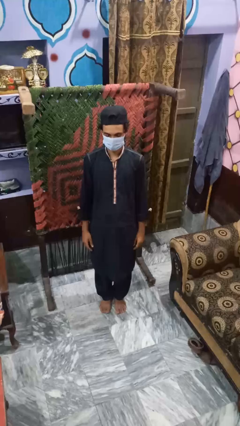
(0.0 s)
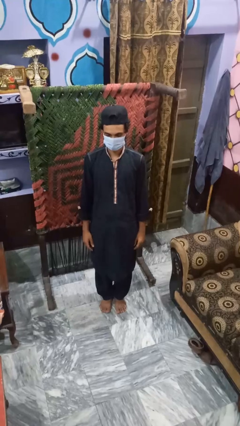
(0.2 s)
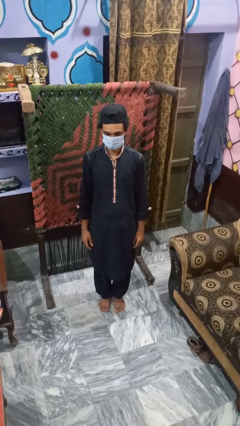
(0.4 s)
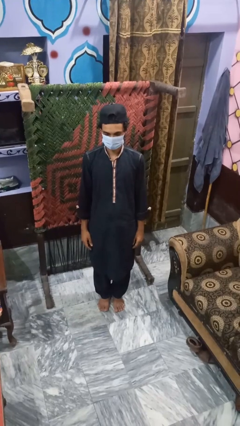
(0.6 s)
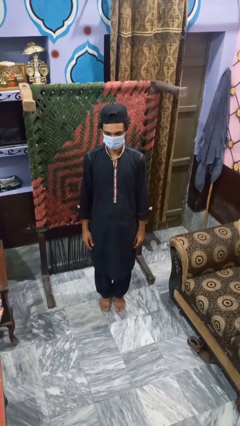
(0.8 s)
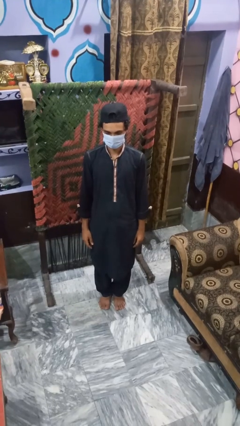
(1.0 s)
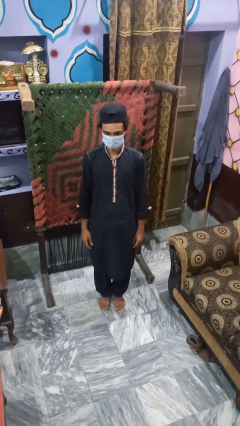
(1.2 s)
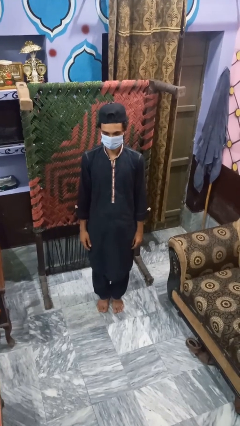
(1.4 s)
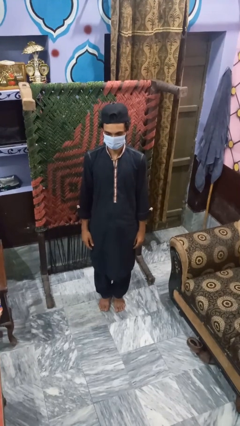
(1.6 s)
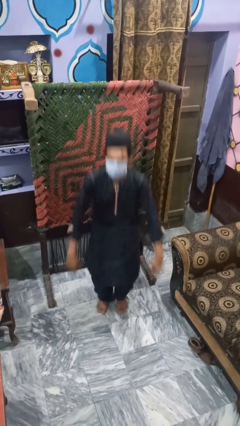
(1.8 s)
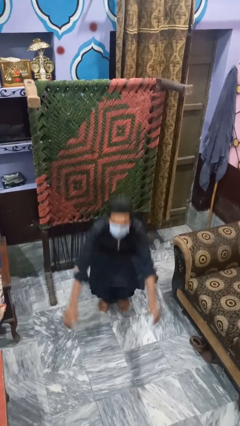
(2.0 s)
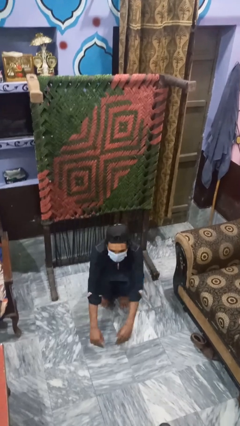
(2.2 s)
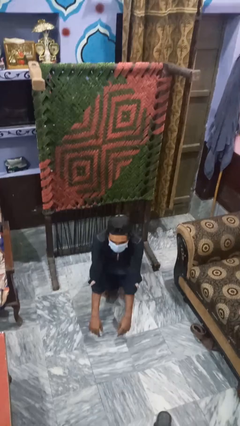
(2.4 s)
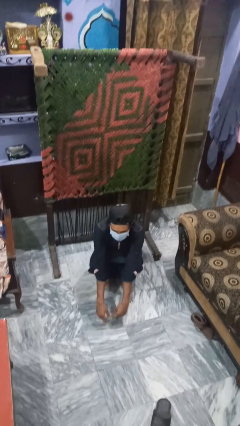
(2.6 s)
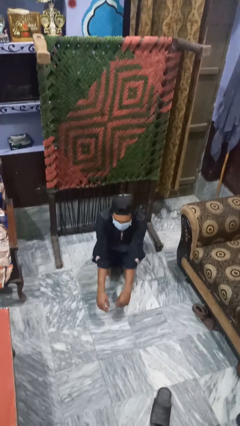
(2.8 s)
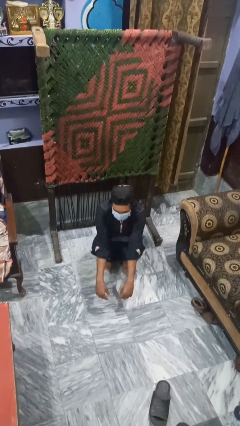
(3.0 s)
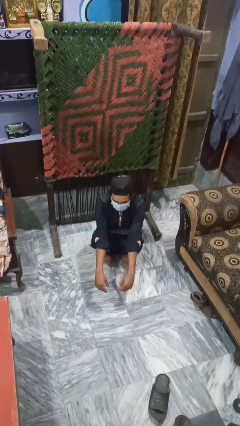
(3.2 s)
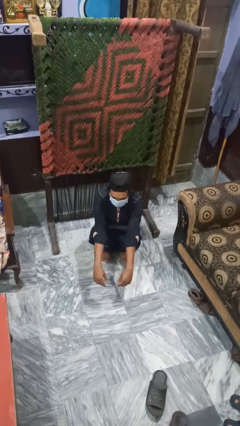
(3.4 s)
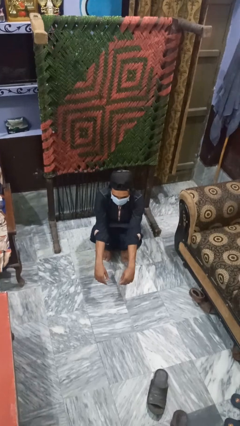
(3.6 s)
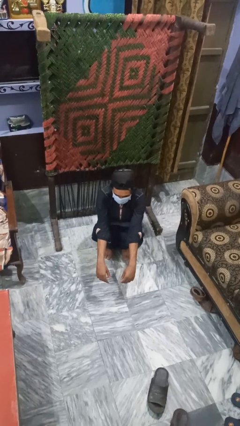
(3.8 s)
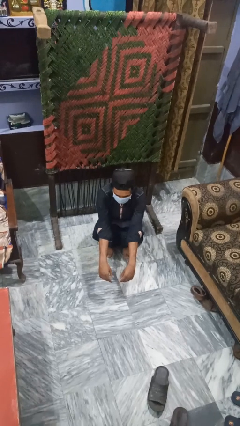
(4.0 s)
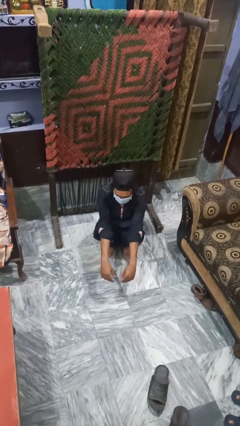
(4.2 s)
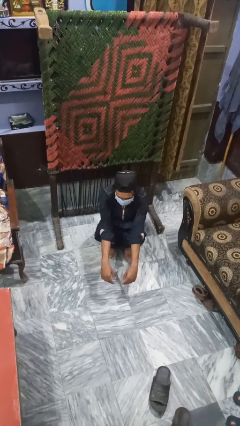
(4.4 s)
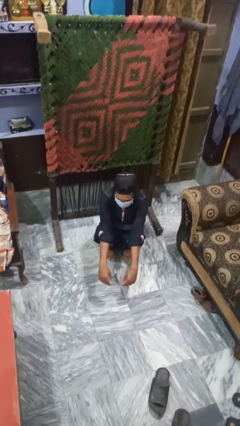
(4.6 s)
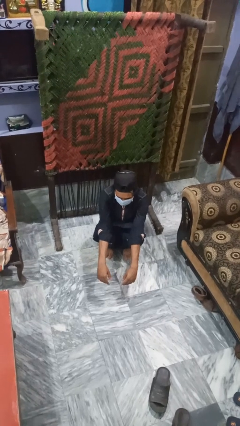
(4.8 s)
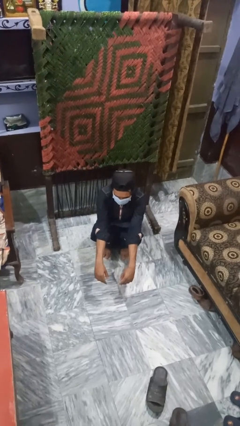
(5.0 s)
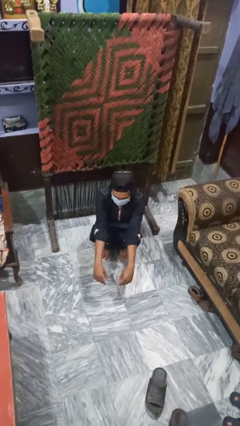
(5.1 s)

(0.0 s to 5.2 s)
person squats

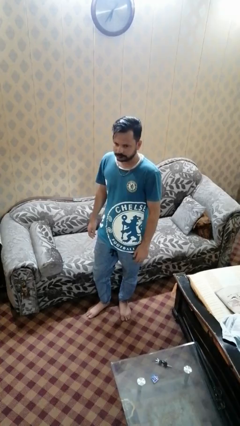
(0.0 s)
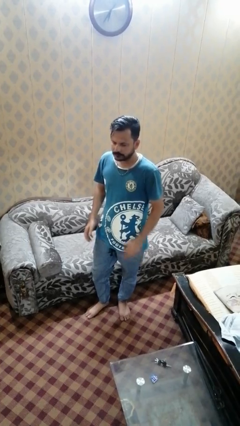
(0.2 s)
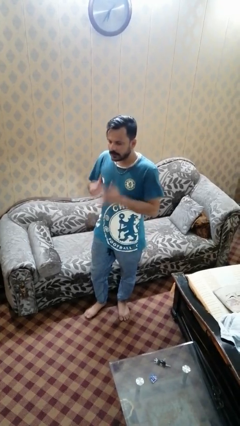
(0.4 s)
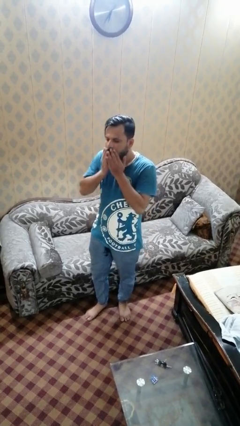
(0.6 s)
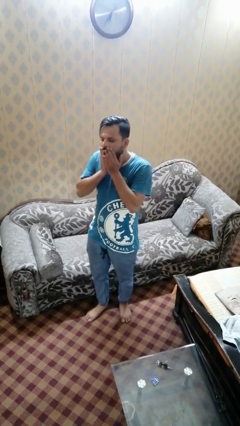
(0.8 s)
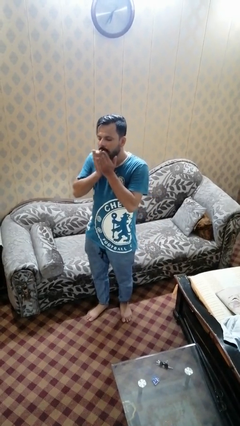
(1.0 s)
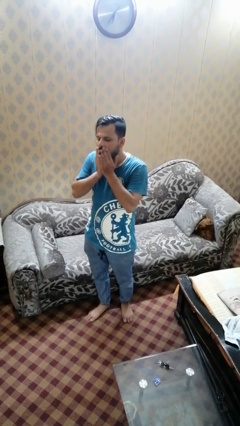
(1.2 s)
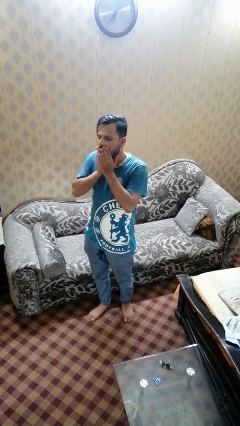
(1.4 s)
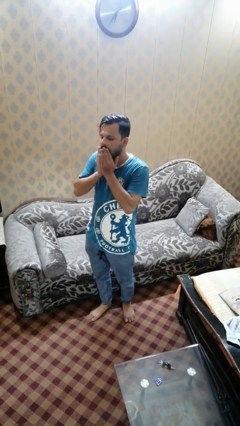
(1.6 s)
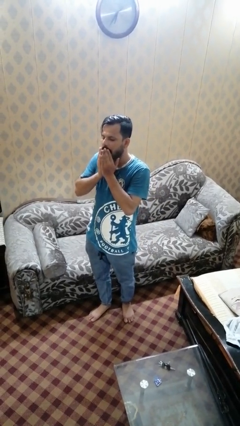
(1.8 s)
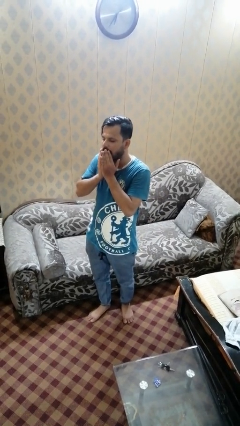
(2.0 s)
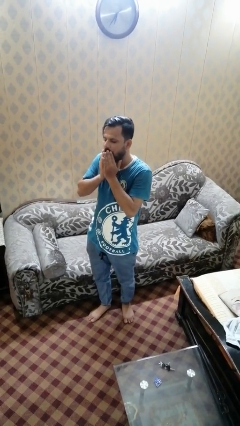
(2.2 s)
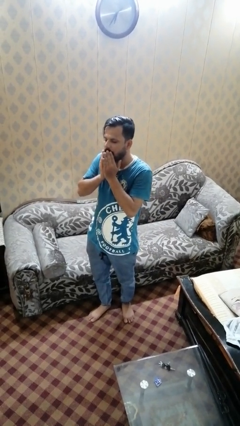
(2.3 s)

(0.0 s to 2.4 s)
person yawns

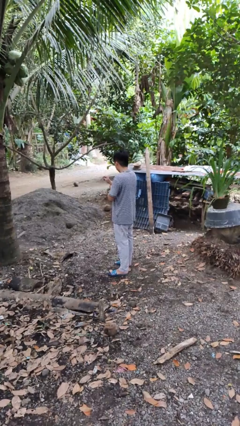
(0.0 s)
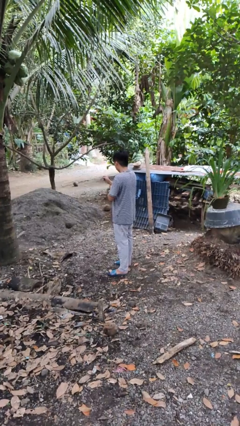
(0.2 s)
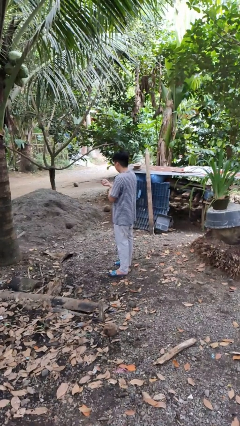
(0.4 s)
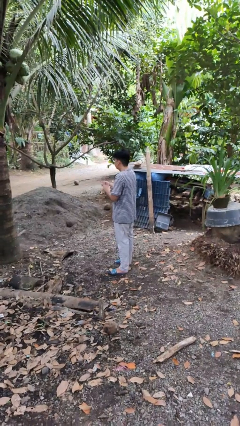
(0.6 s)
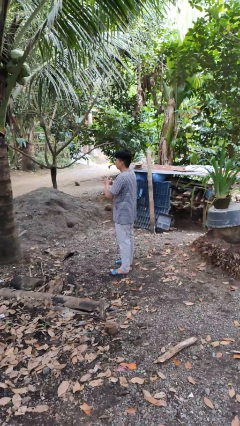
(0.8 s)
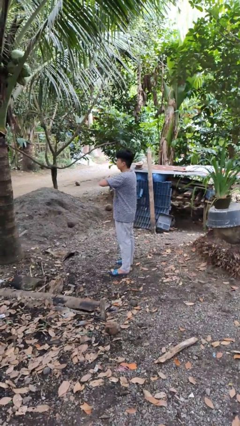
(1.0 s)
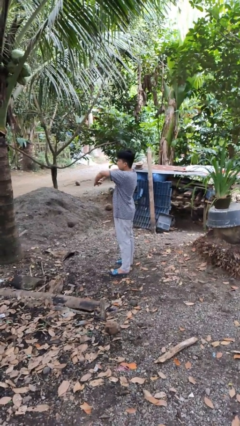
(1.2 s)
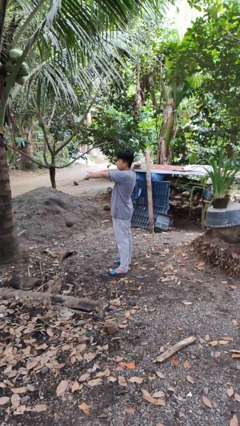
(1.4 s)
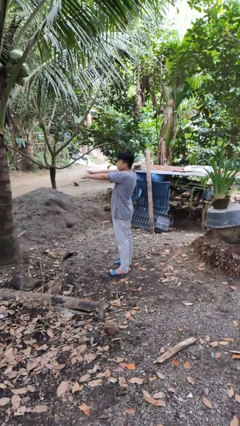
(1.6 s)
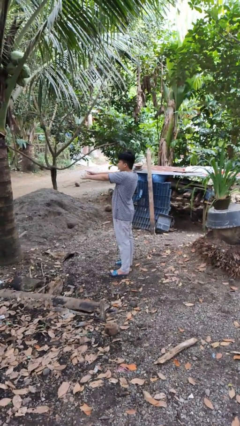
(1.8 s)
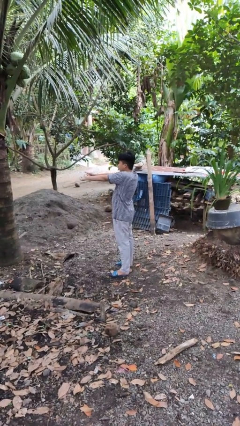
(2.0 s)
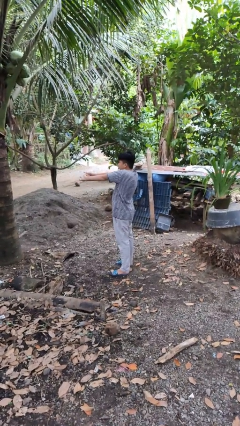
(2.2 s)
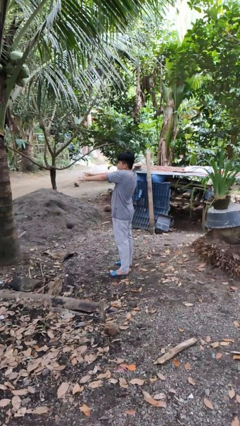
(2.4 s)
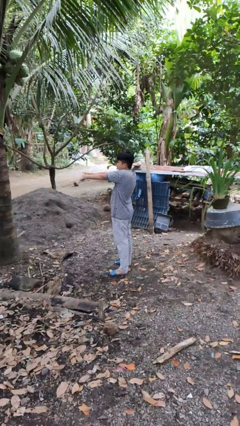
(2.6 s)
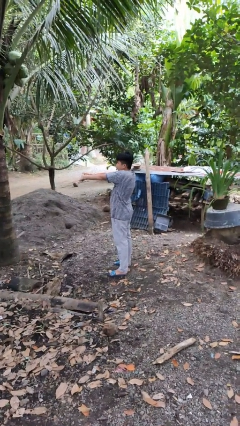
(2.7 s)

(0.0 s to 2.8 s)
person cracks knuckles

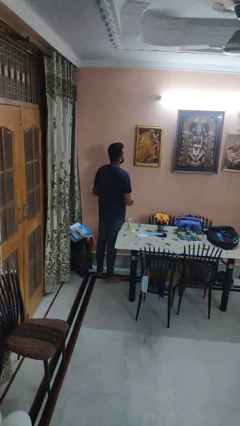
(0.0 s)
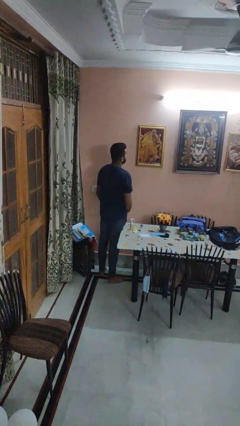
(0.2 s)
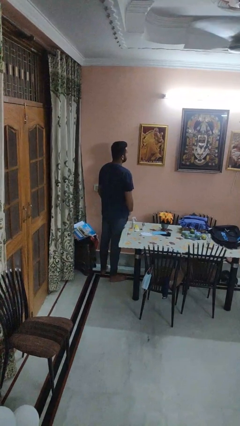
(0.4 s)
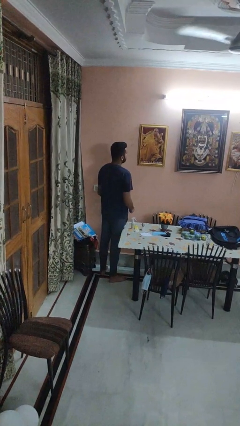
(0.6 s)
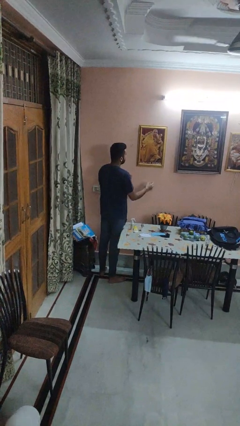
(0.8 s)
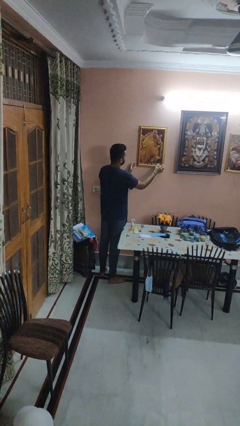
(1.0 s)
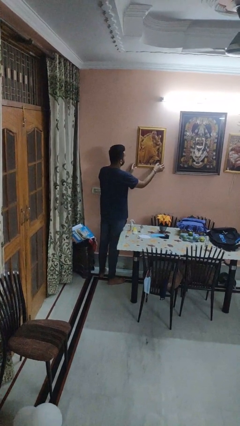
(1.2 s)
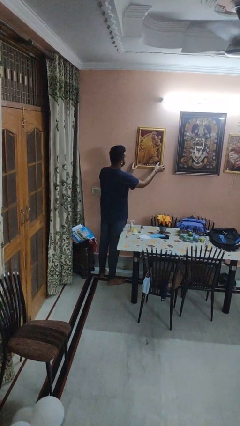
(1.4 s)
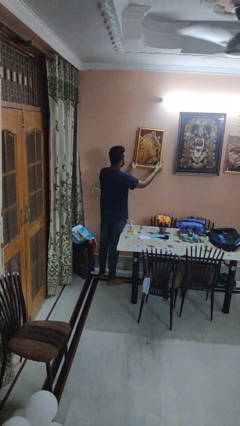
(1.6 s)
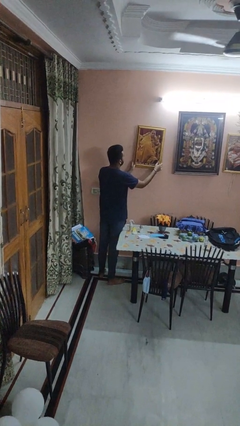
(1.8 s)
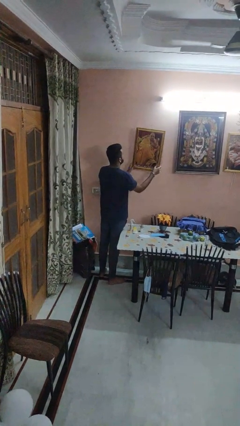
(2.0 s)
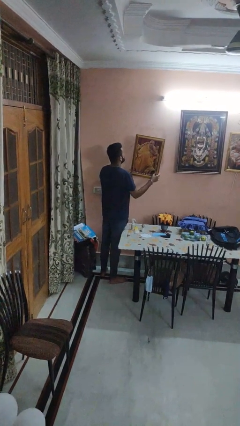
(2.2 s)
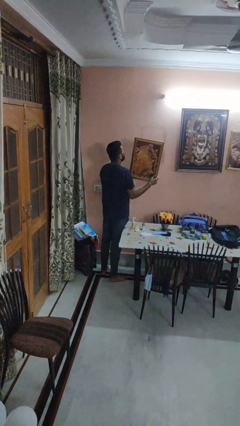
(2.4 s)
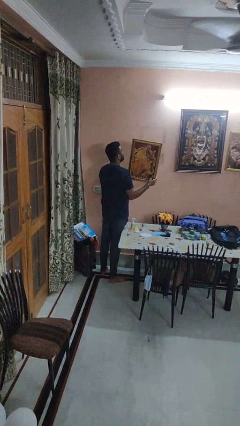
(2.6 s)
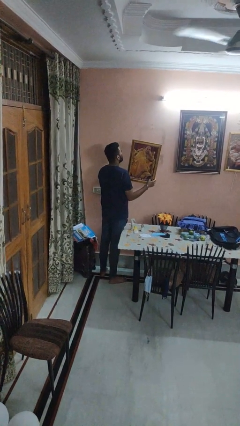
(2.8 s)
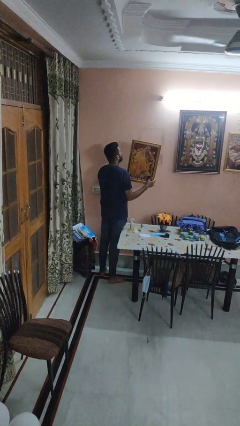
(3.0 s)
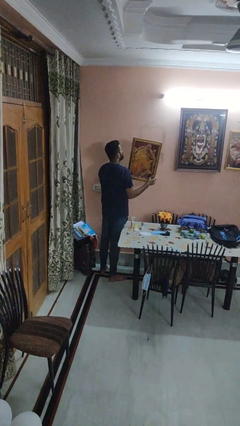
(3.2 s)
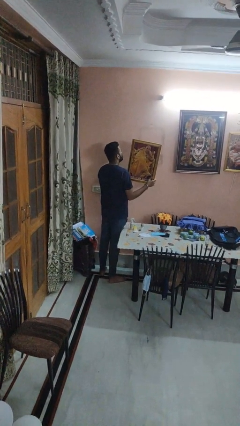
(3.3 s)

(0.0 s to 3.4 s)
person takes down picture frame

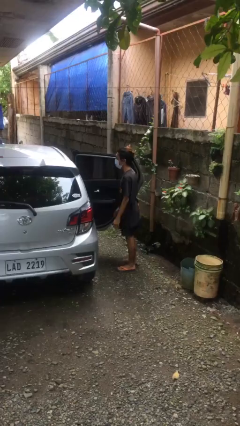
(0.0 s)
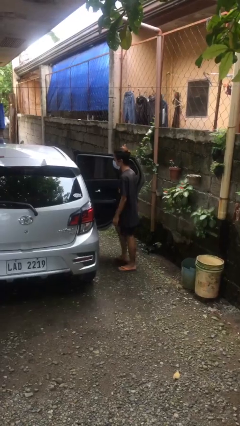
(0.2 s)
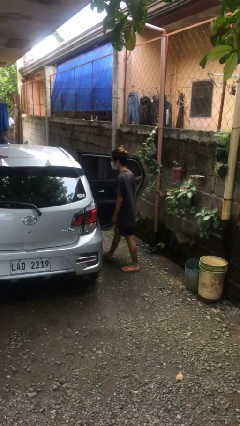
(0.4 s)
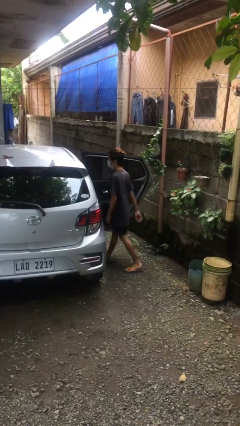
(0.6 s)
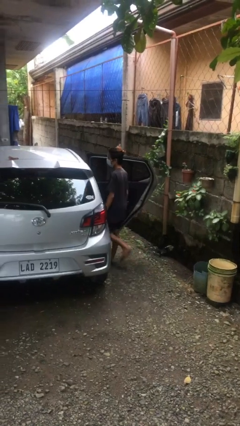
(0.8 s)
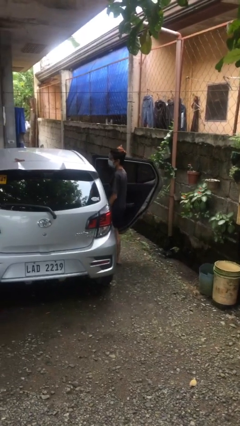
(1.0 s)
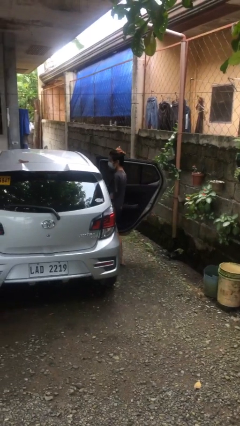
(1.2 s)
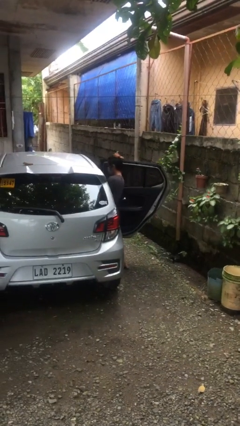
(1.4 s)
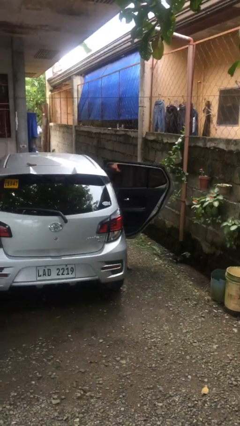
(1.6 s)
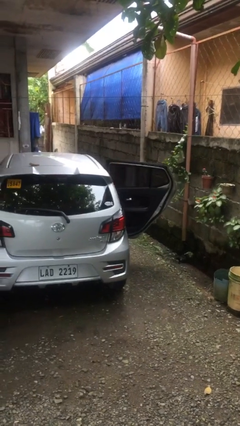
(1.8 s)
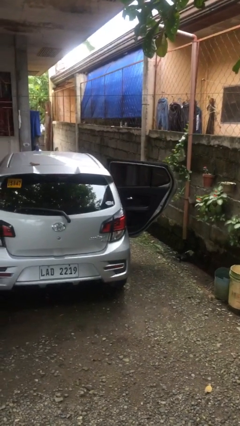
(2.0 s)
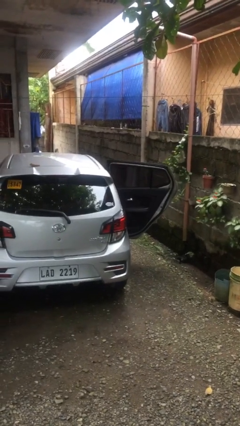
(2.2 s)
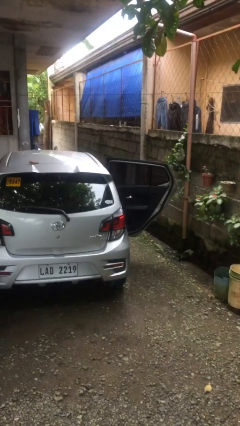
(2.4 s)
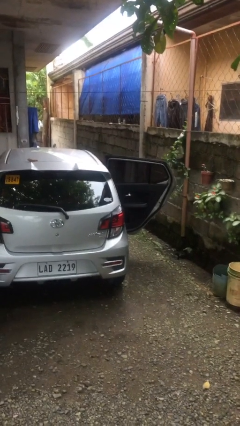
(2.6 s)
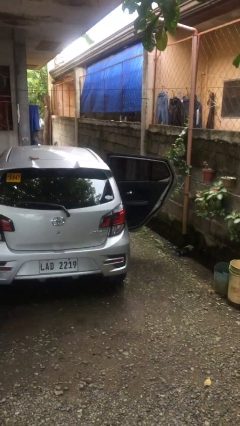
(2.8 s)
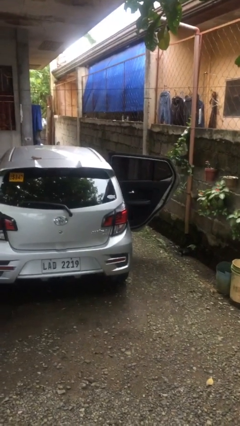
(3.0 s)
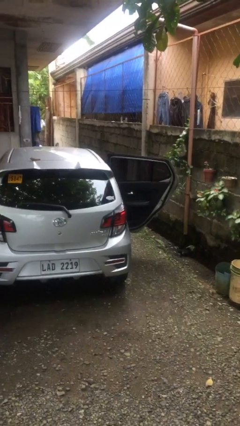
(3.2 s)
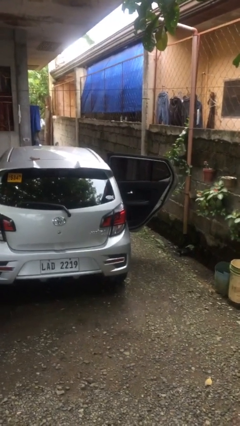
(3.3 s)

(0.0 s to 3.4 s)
person enters car
